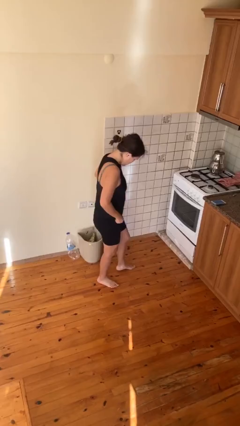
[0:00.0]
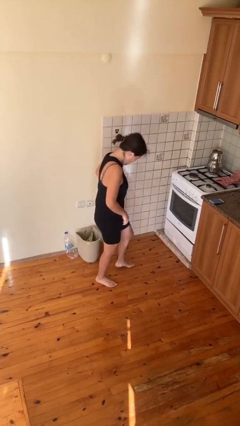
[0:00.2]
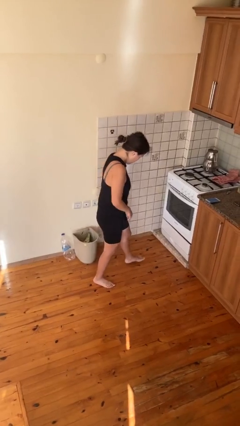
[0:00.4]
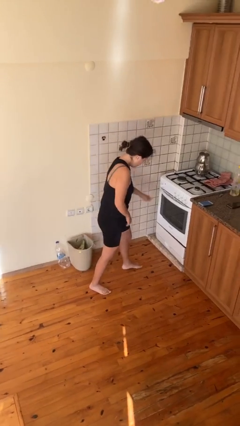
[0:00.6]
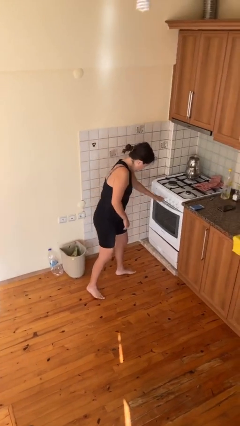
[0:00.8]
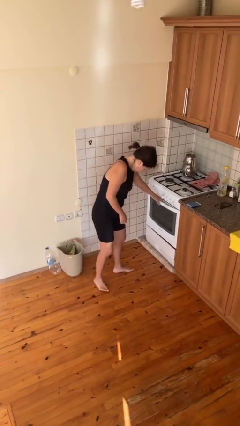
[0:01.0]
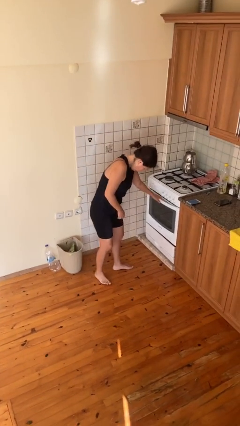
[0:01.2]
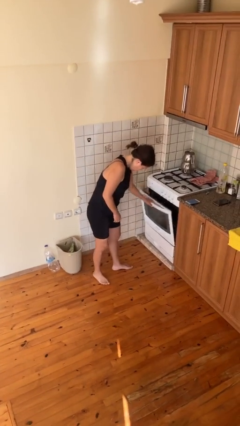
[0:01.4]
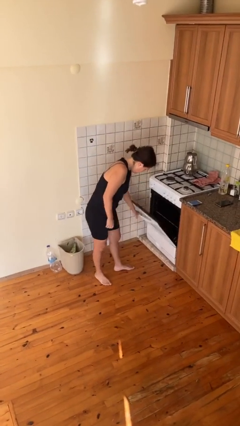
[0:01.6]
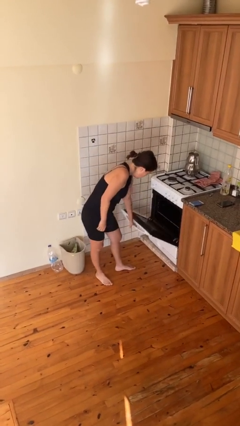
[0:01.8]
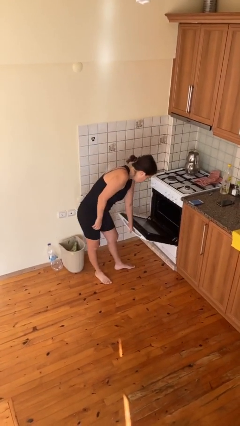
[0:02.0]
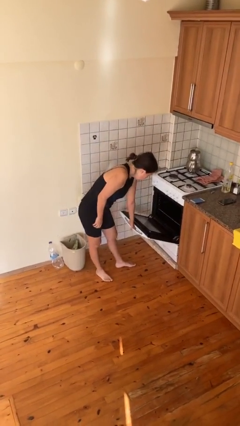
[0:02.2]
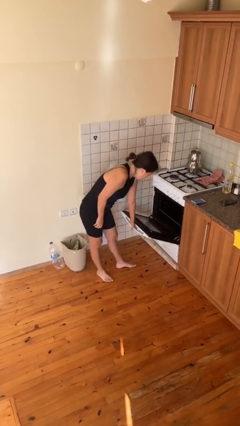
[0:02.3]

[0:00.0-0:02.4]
person opens oven door

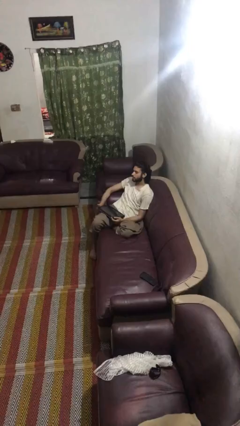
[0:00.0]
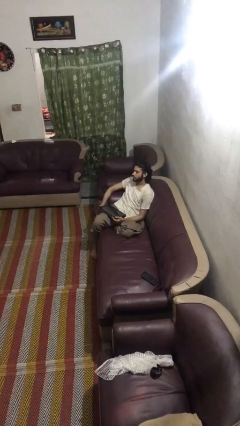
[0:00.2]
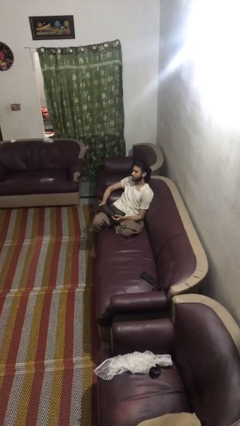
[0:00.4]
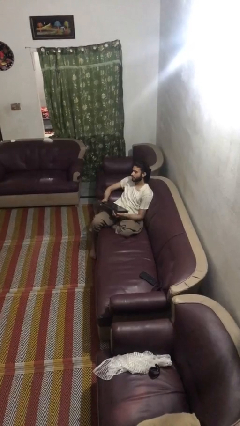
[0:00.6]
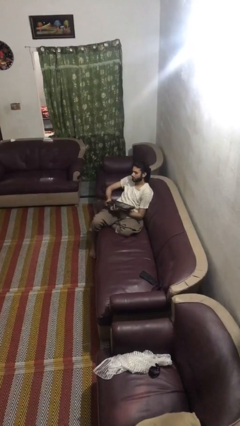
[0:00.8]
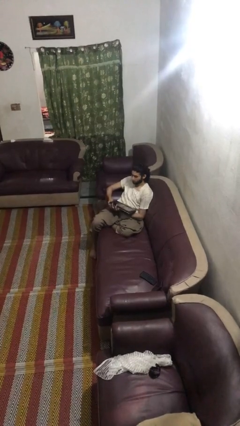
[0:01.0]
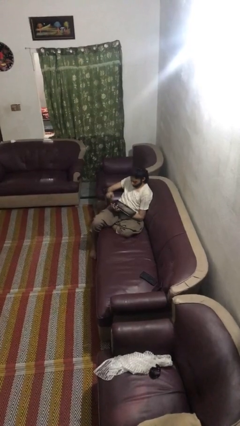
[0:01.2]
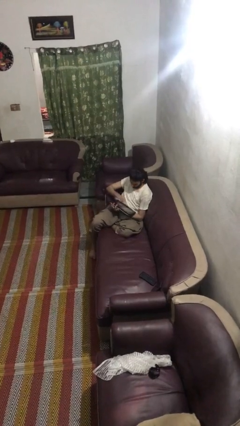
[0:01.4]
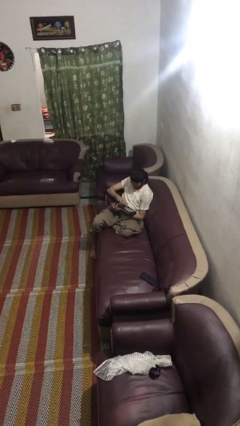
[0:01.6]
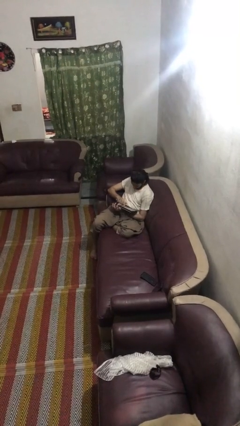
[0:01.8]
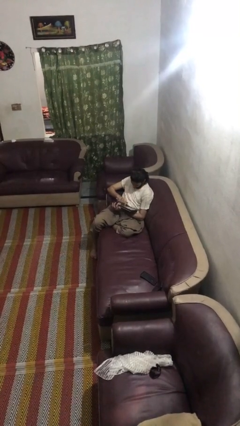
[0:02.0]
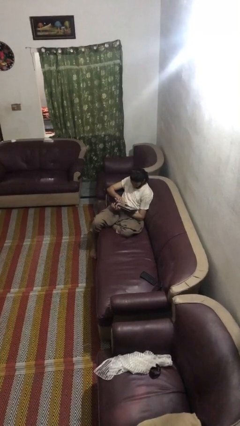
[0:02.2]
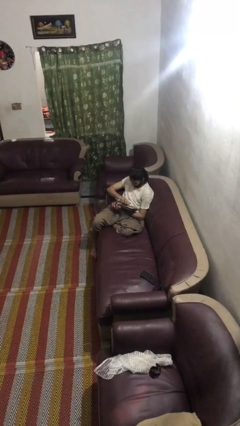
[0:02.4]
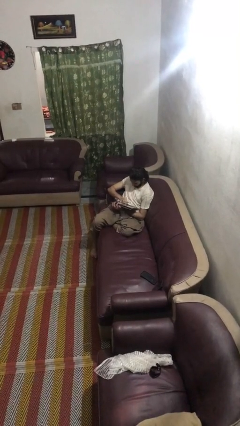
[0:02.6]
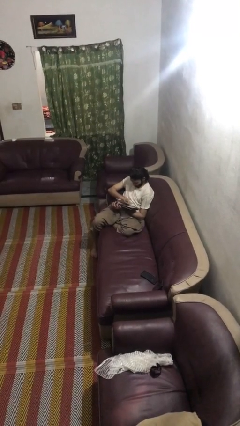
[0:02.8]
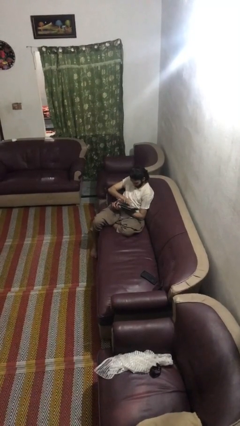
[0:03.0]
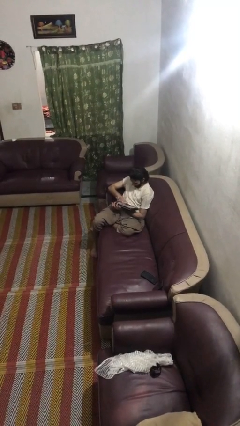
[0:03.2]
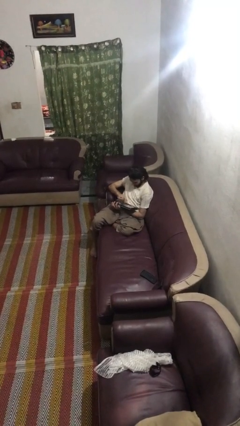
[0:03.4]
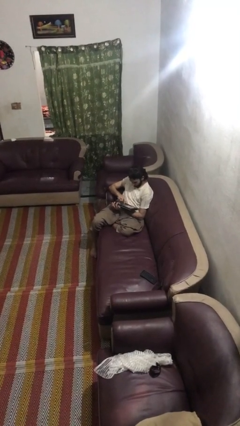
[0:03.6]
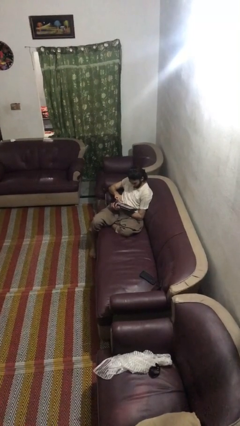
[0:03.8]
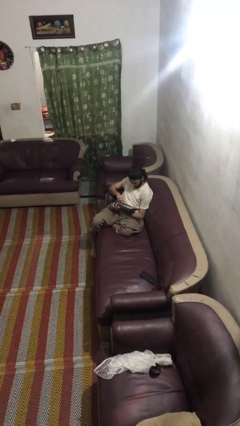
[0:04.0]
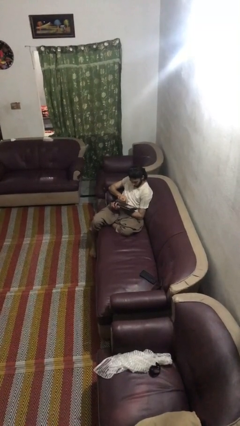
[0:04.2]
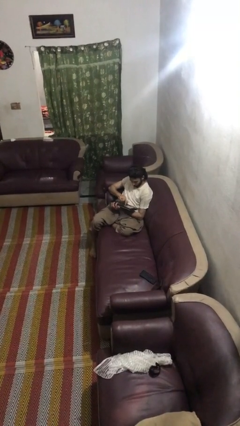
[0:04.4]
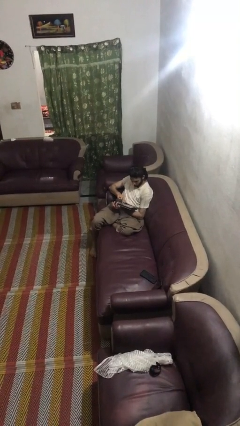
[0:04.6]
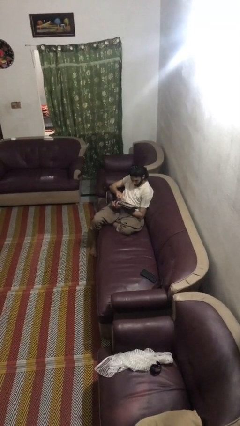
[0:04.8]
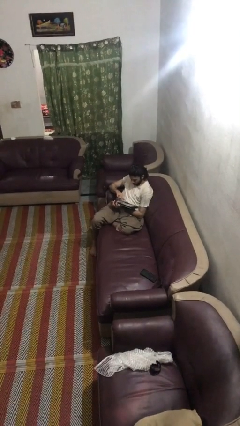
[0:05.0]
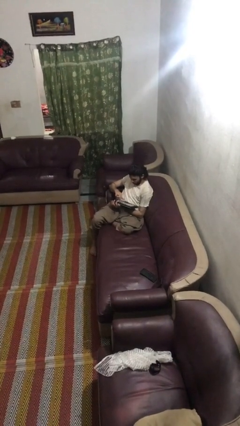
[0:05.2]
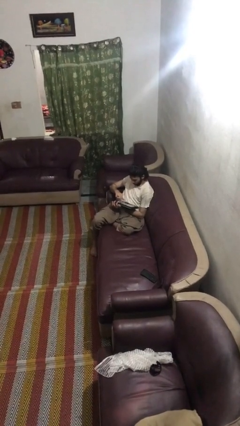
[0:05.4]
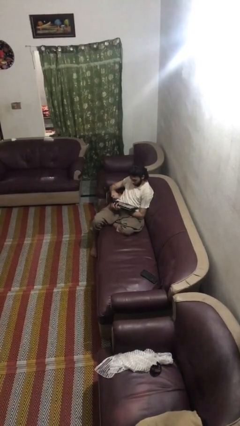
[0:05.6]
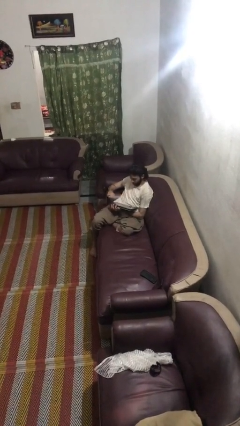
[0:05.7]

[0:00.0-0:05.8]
person interacts with tablet

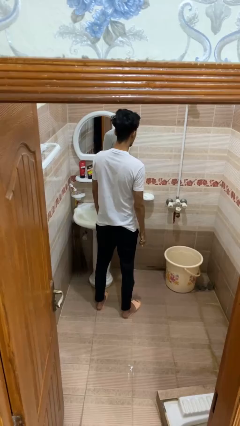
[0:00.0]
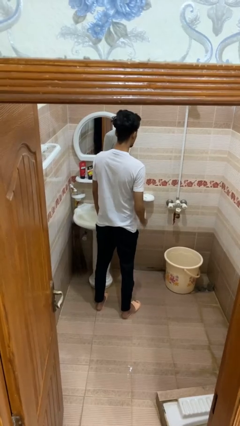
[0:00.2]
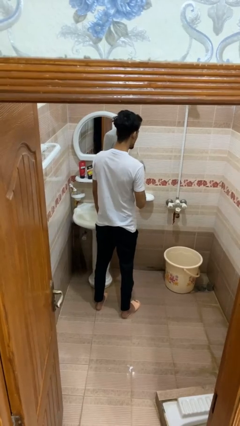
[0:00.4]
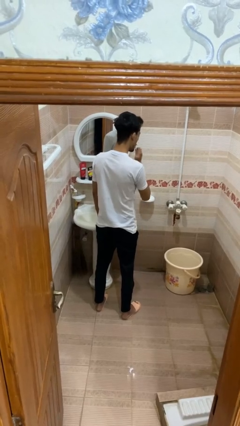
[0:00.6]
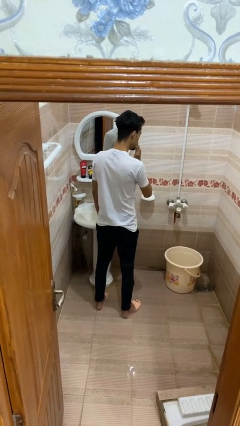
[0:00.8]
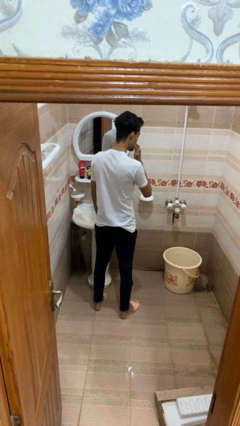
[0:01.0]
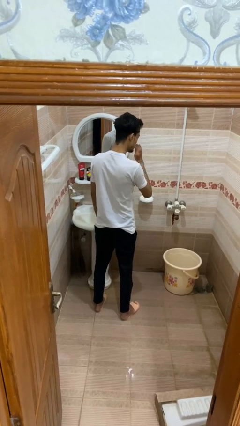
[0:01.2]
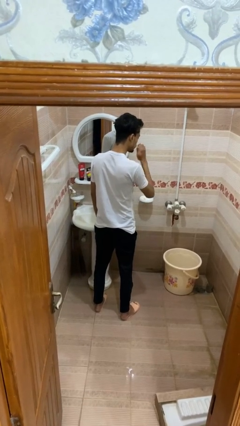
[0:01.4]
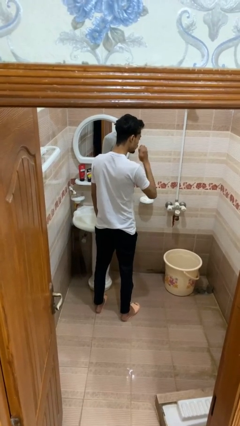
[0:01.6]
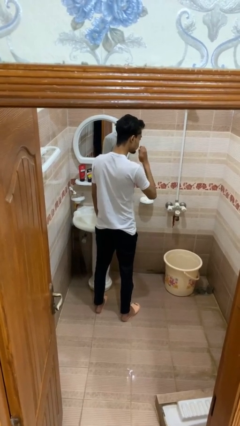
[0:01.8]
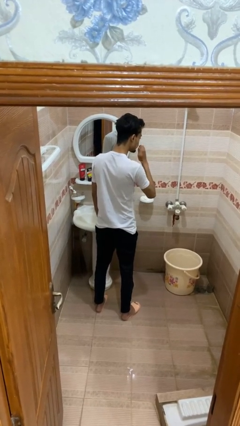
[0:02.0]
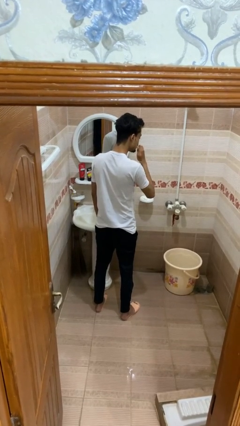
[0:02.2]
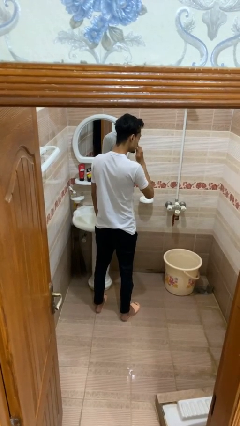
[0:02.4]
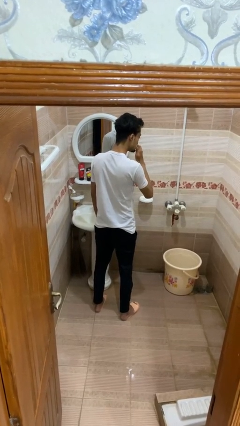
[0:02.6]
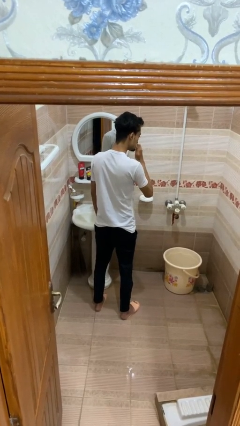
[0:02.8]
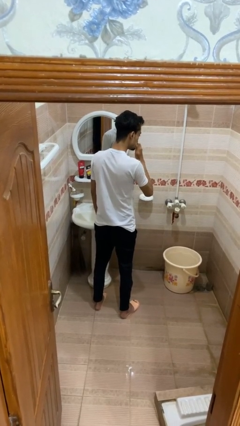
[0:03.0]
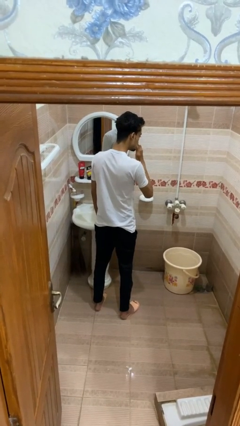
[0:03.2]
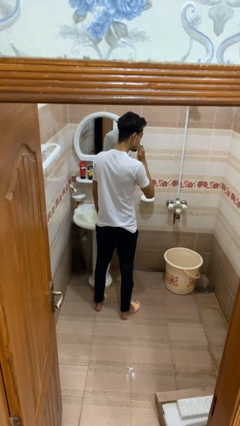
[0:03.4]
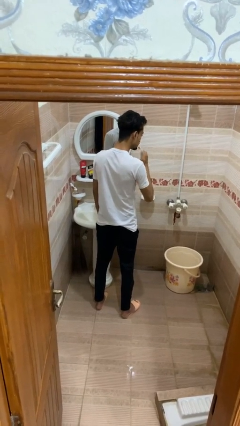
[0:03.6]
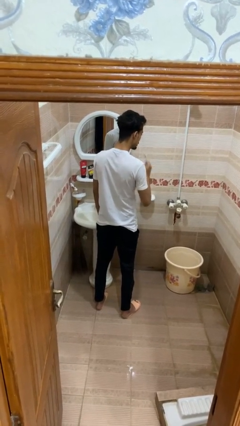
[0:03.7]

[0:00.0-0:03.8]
person brushes teeth

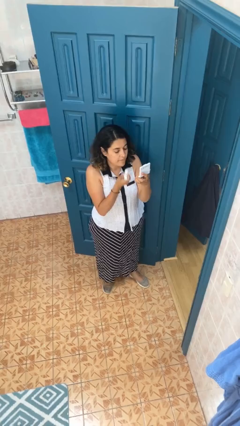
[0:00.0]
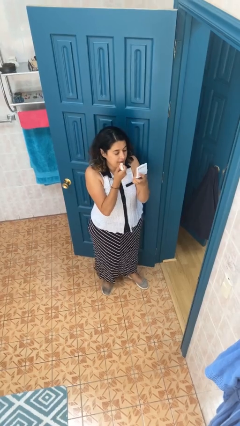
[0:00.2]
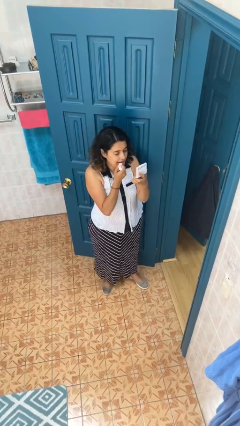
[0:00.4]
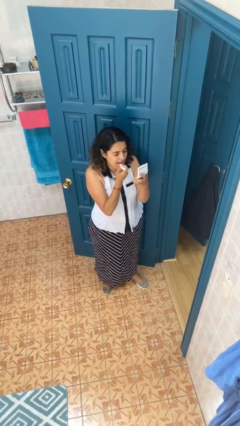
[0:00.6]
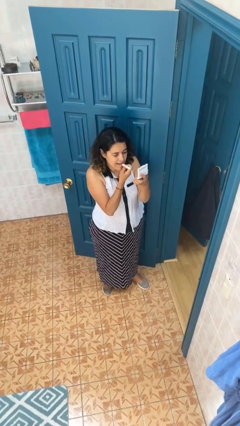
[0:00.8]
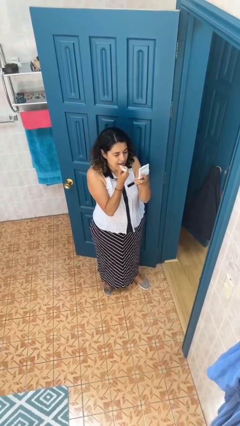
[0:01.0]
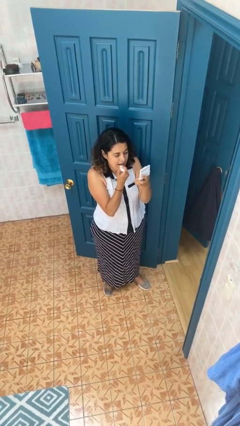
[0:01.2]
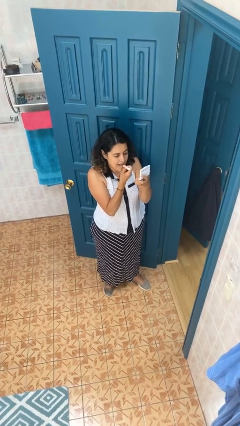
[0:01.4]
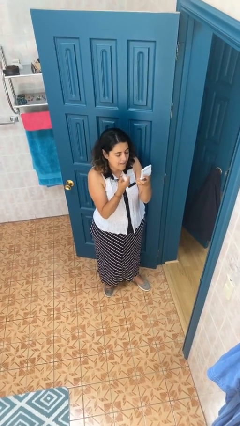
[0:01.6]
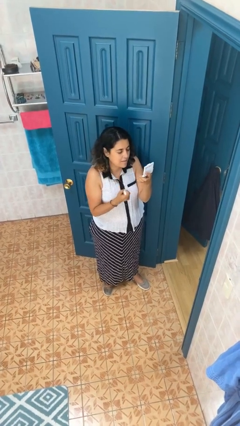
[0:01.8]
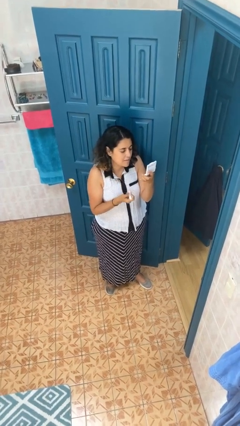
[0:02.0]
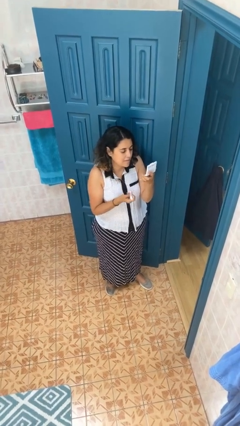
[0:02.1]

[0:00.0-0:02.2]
person applies lip makeup

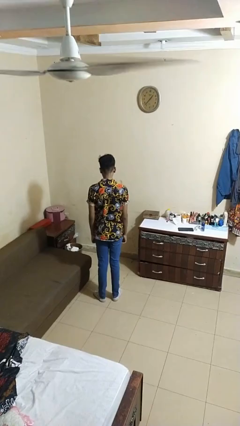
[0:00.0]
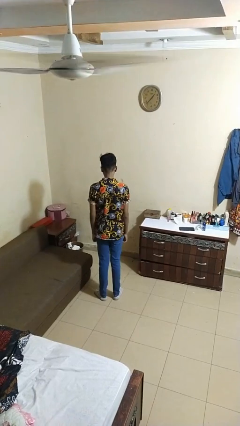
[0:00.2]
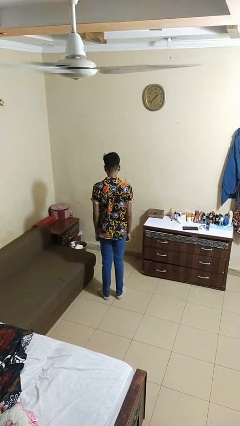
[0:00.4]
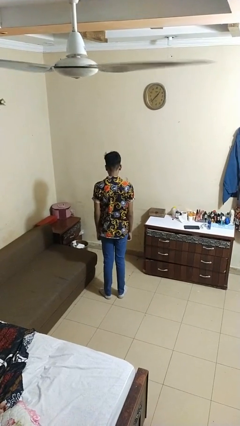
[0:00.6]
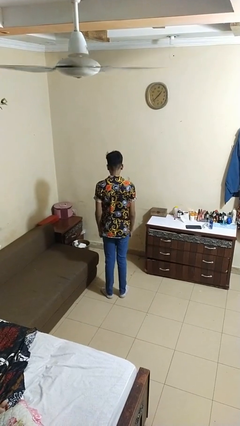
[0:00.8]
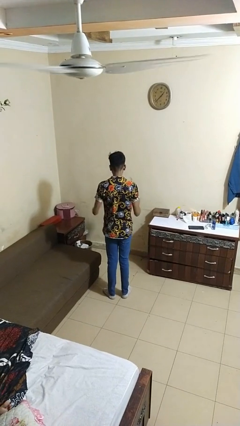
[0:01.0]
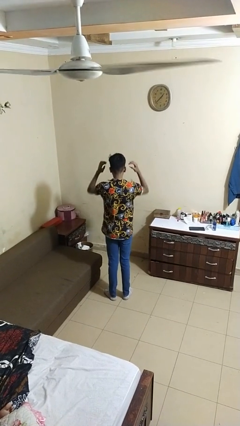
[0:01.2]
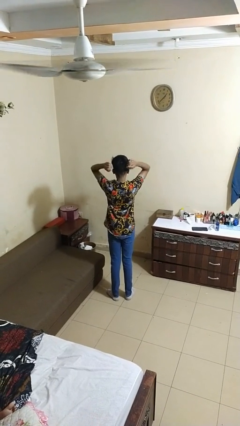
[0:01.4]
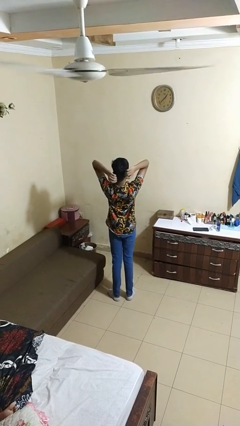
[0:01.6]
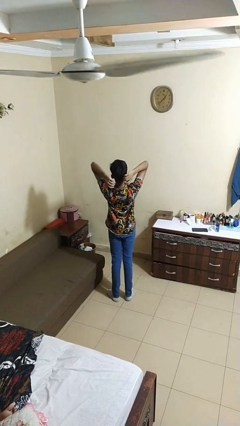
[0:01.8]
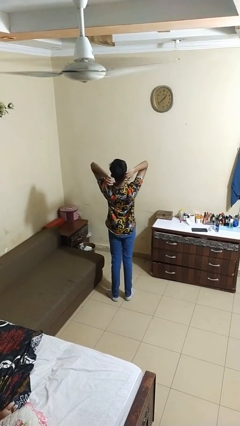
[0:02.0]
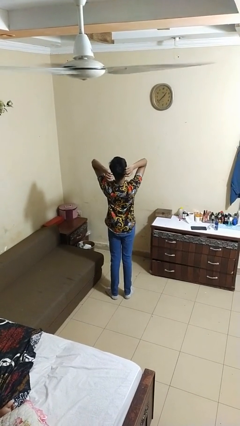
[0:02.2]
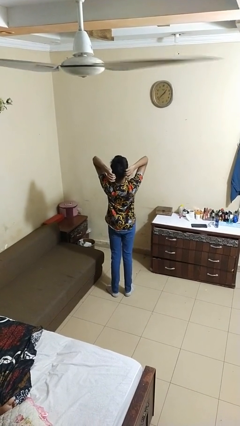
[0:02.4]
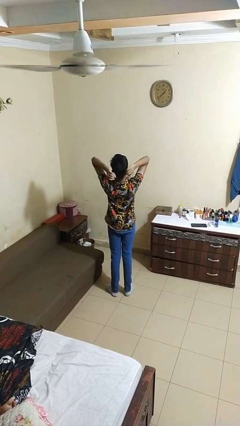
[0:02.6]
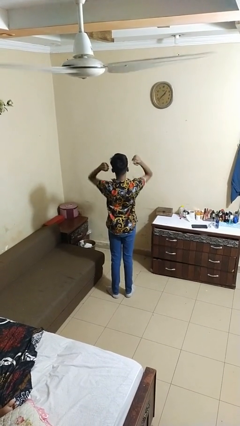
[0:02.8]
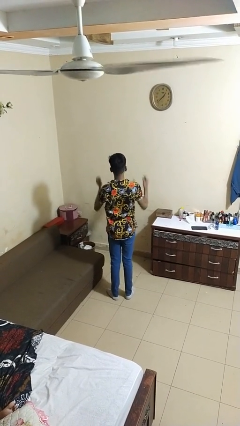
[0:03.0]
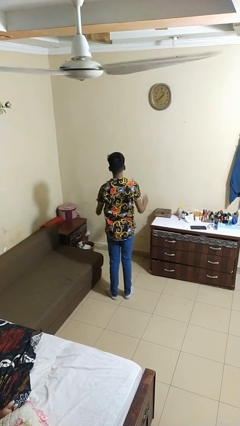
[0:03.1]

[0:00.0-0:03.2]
person stretches arms over head

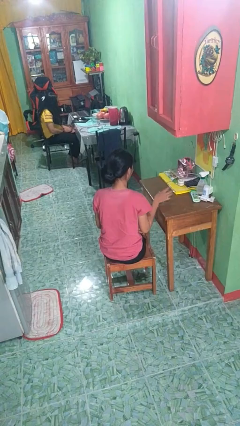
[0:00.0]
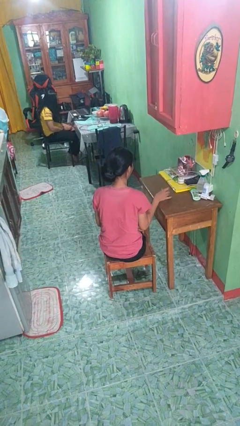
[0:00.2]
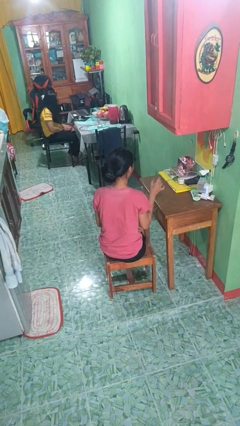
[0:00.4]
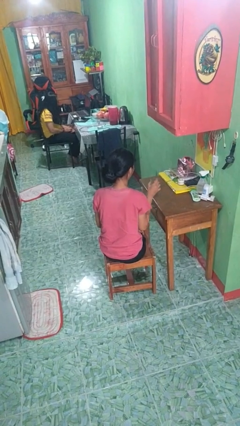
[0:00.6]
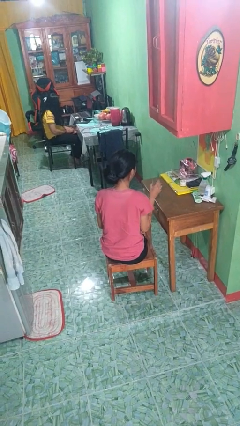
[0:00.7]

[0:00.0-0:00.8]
person picks up object from table
